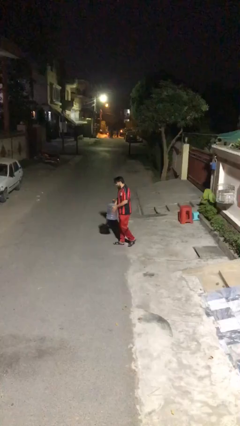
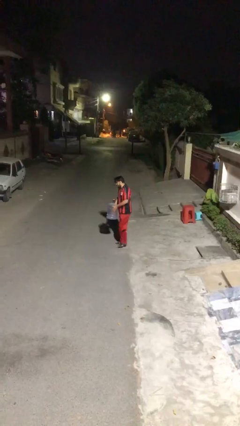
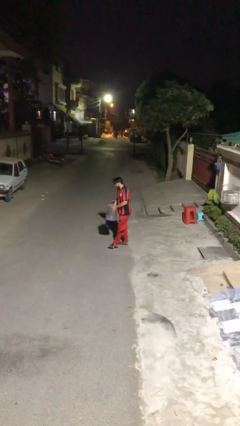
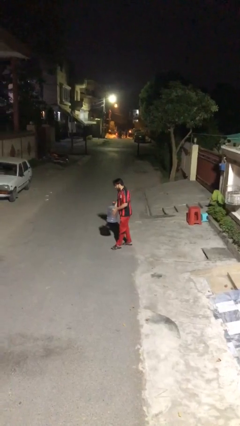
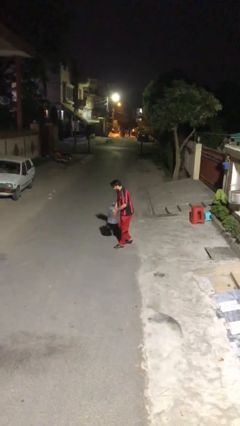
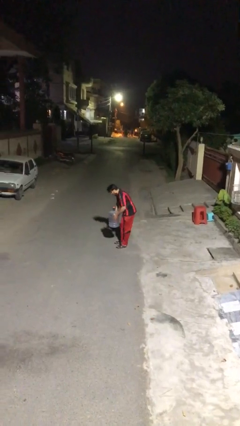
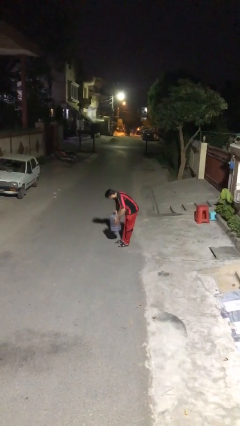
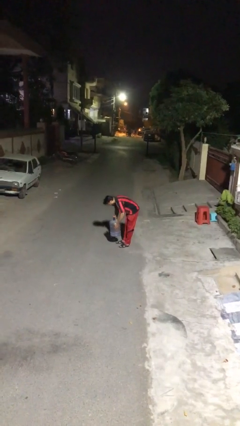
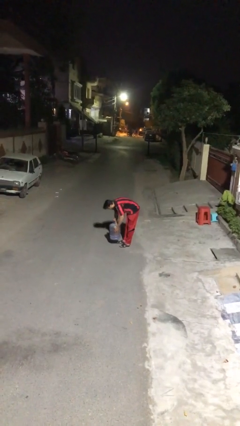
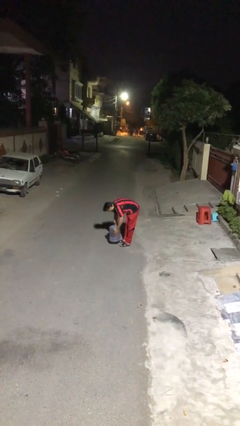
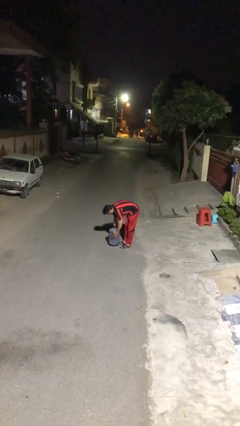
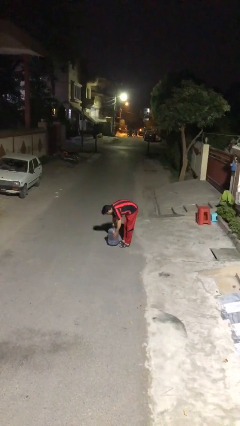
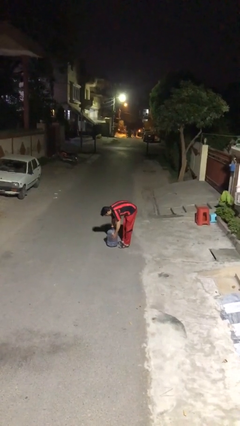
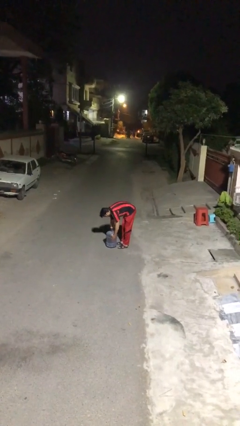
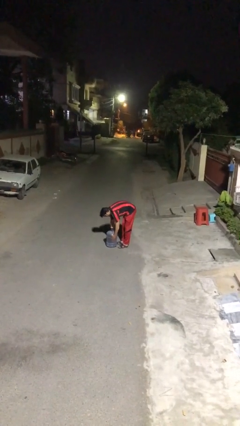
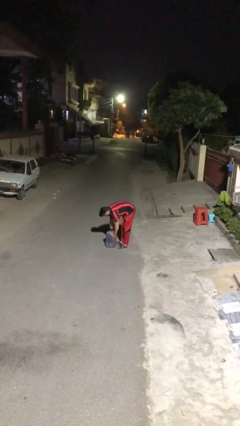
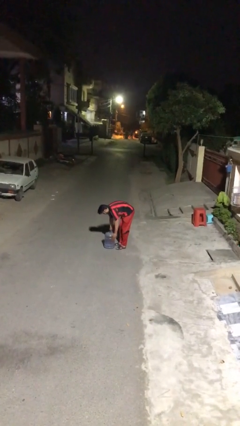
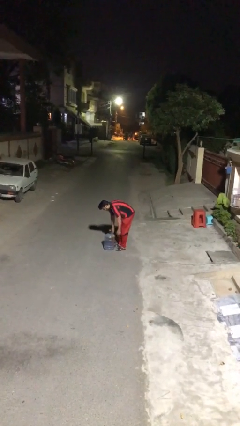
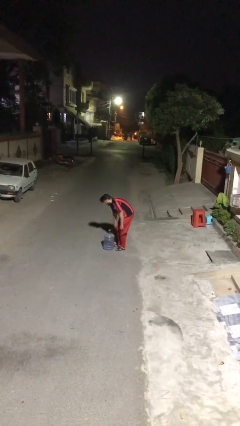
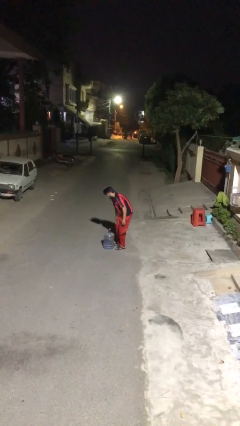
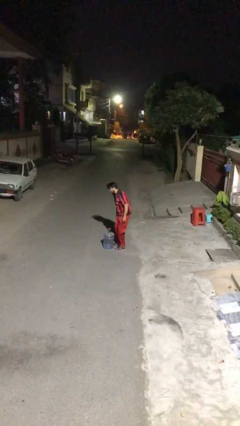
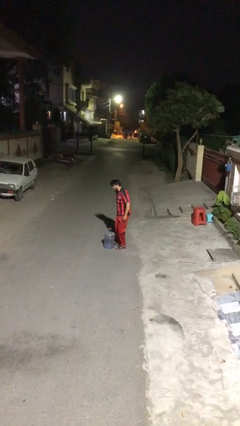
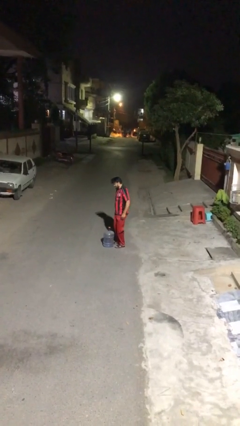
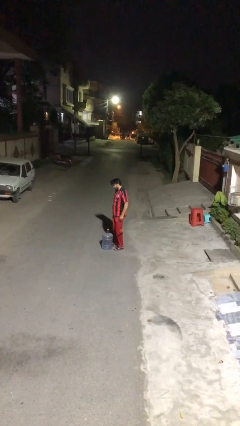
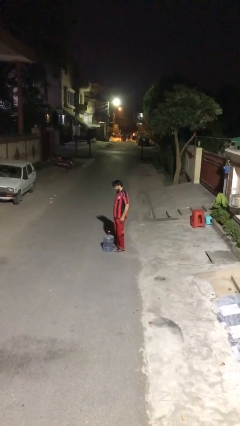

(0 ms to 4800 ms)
person puts down object on floor

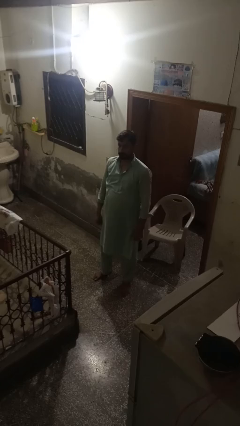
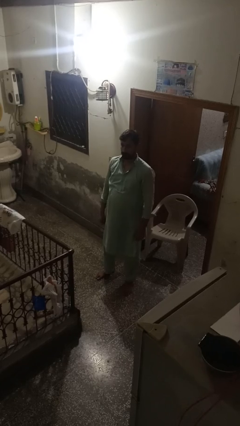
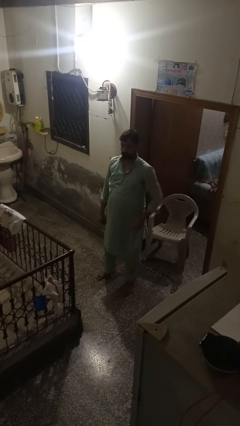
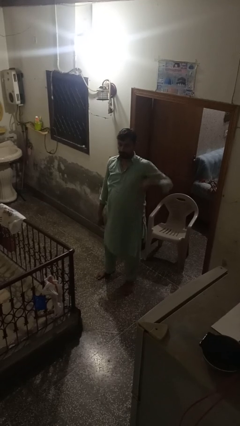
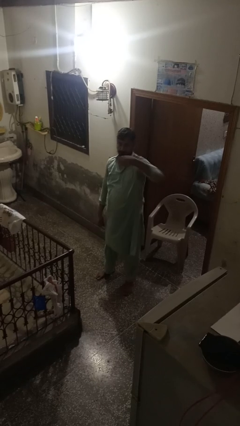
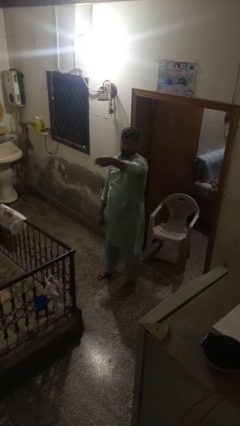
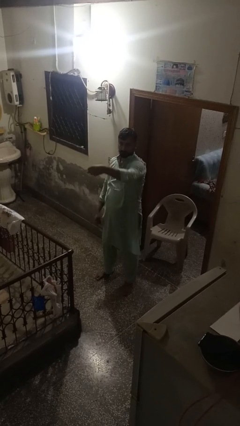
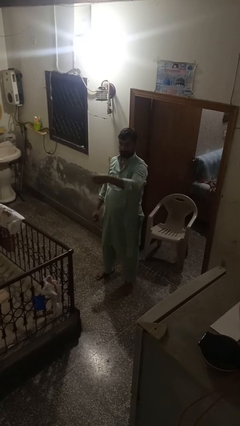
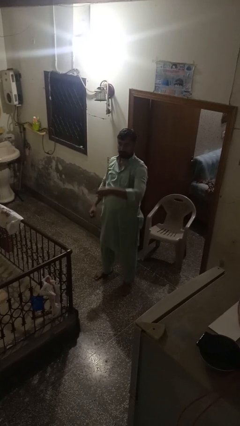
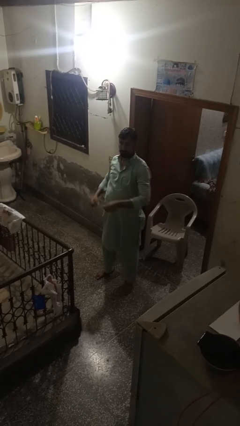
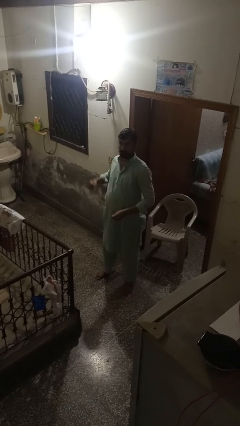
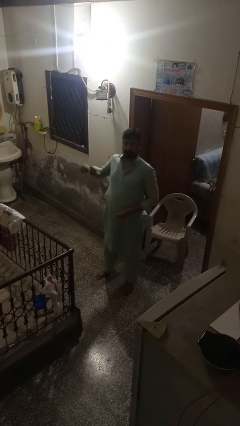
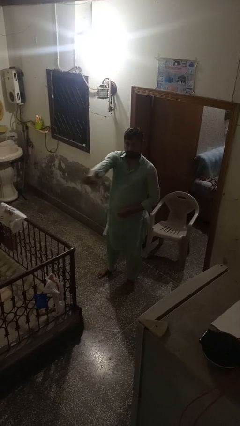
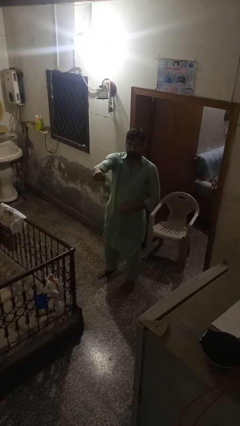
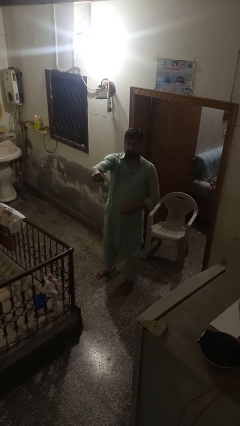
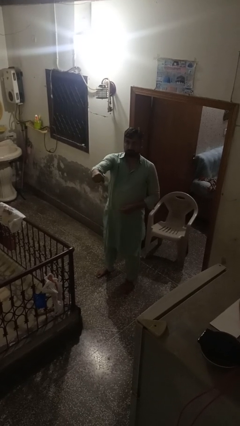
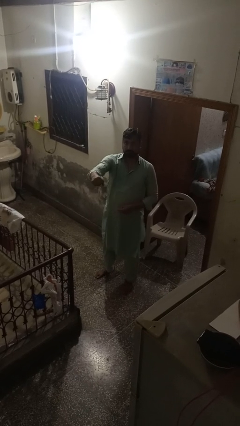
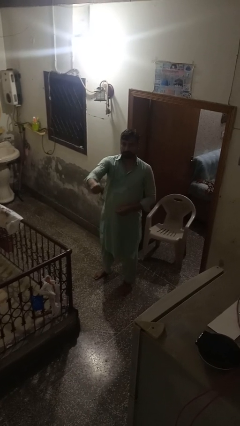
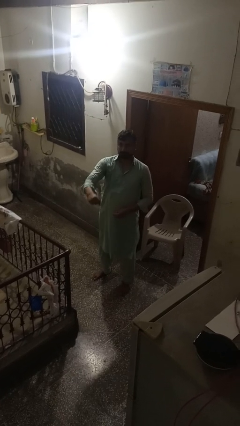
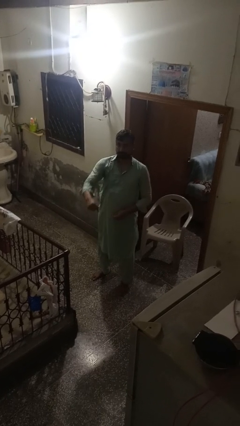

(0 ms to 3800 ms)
person punches

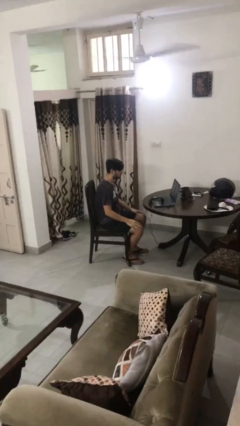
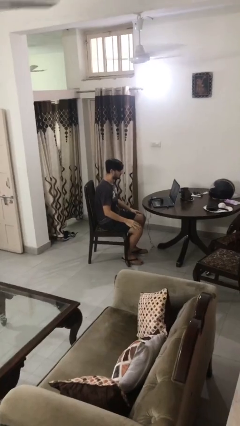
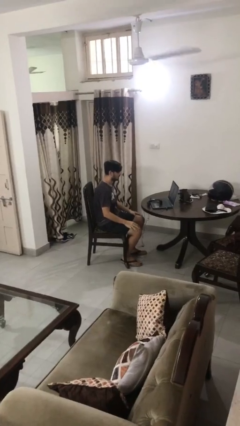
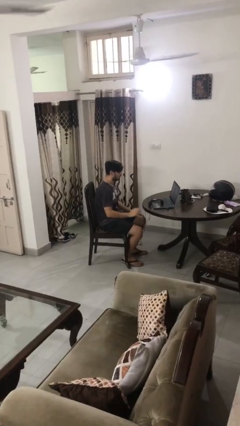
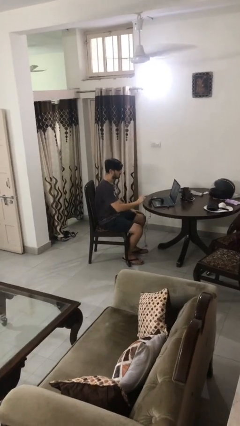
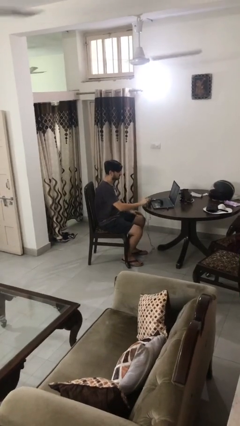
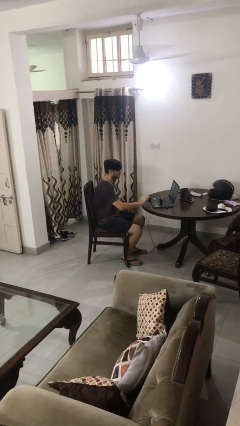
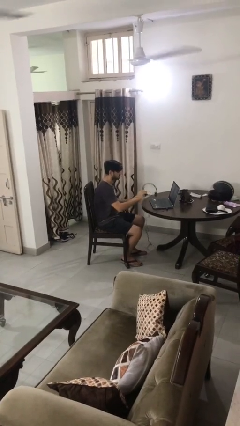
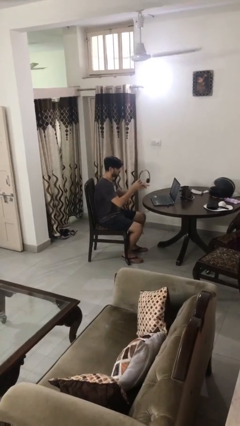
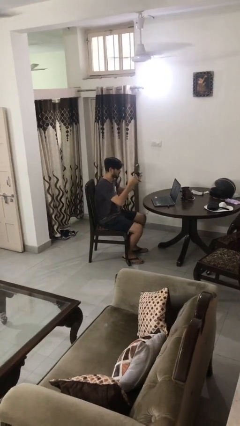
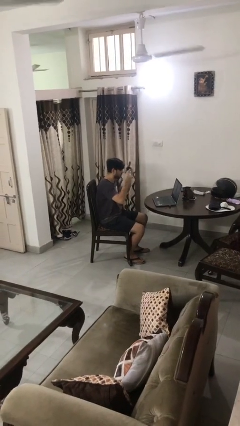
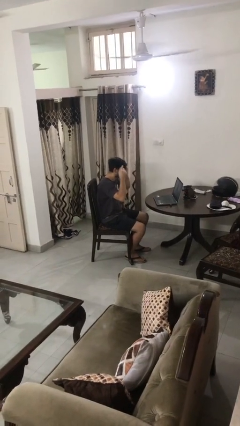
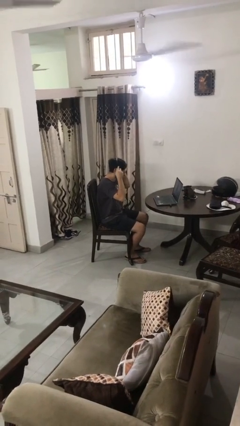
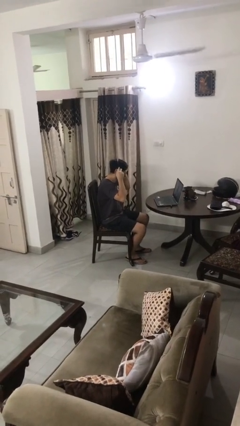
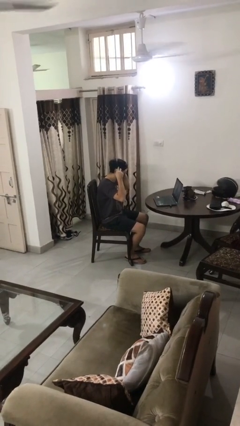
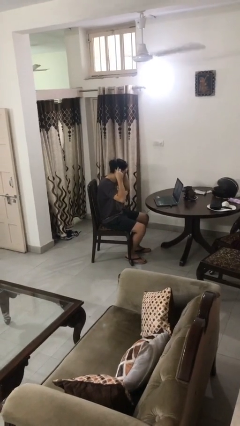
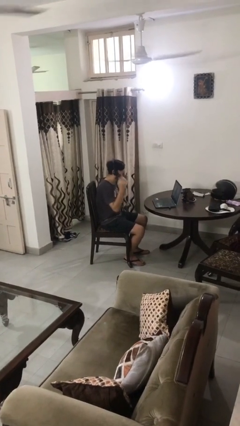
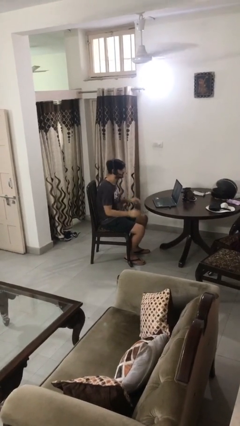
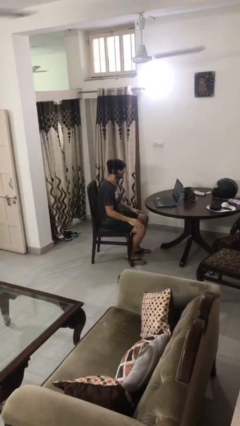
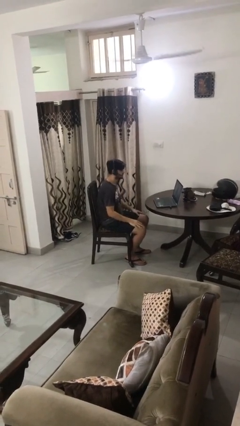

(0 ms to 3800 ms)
person puts on headphones

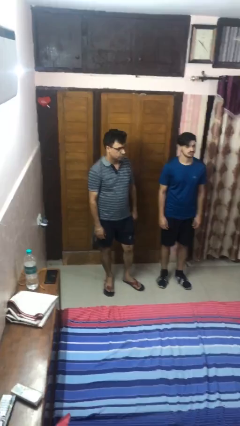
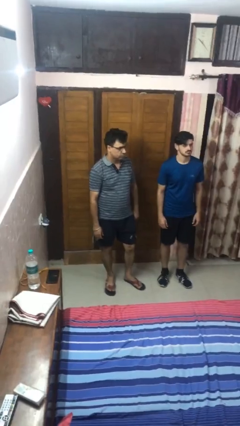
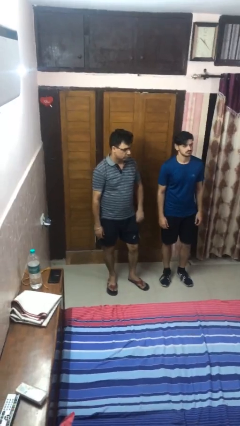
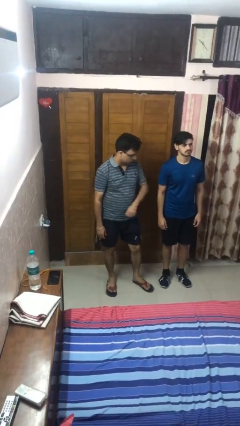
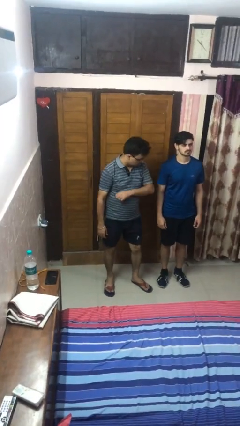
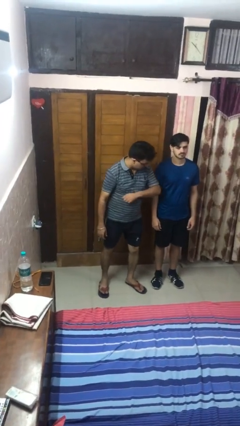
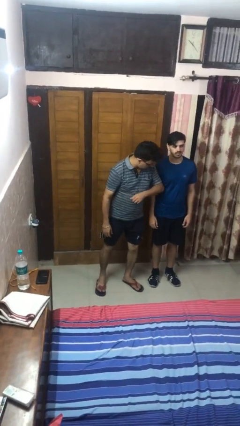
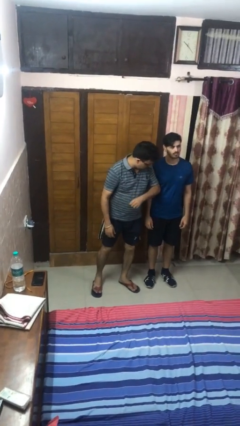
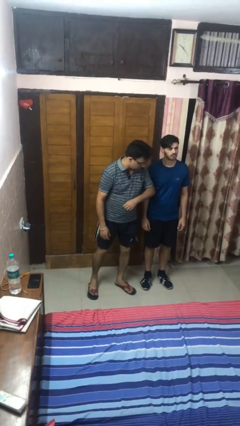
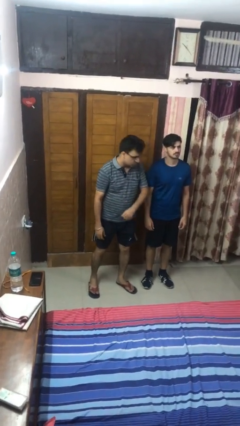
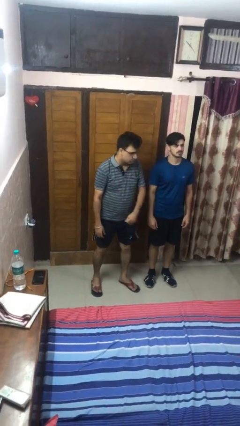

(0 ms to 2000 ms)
person nudges person with elbow

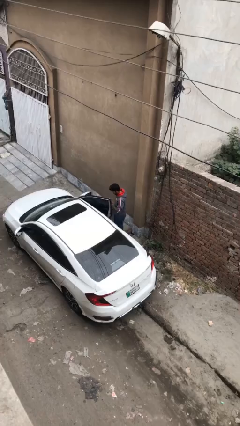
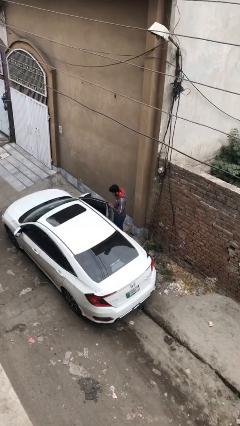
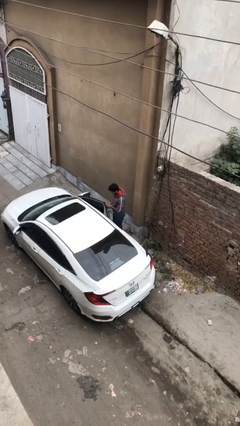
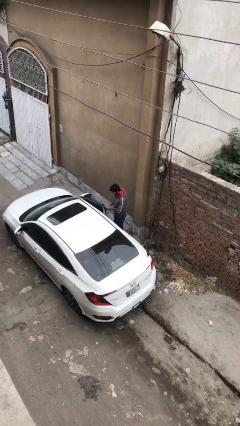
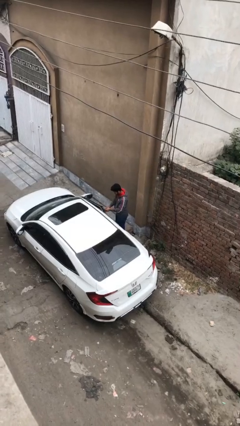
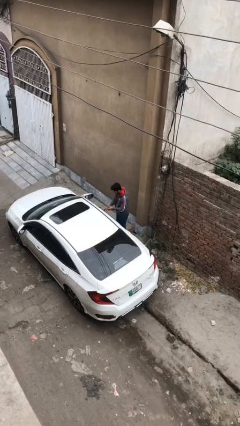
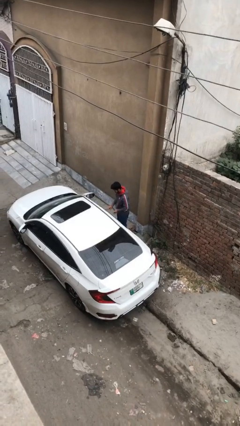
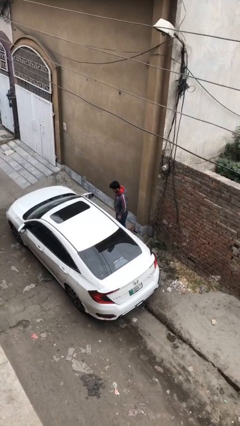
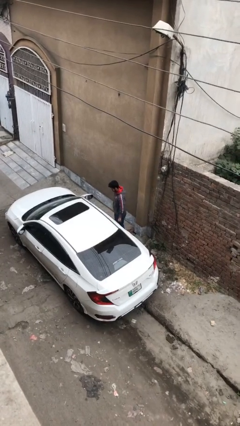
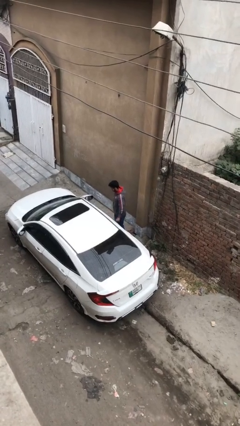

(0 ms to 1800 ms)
person closes car door

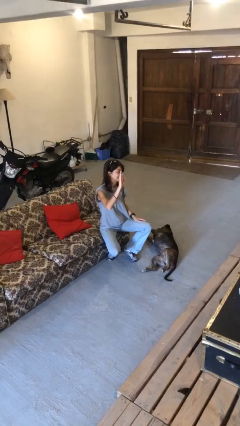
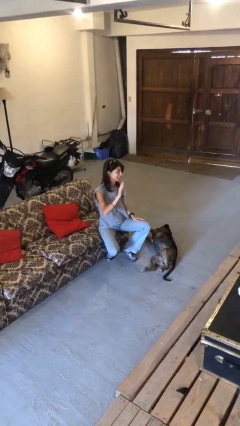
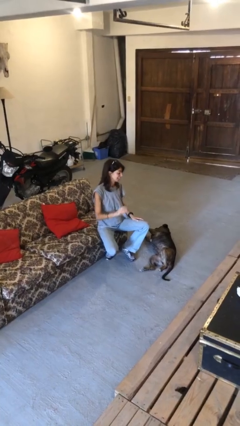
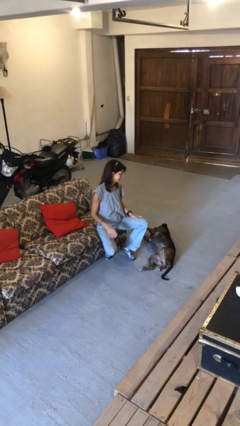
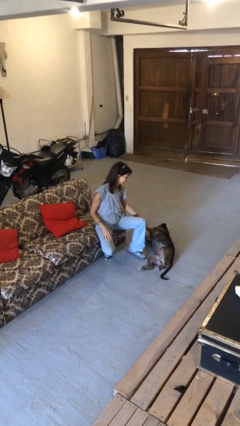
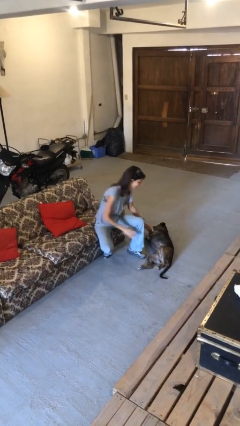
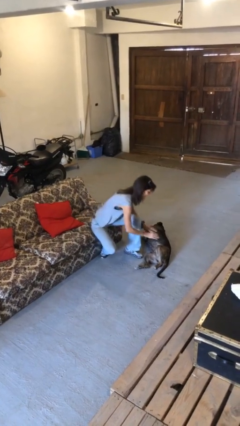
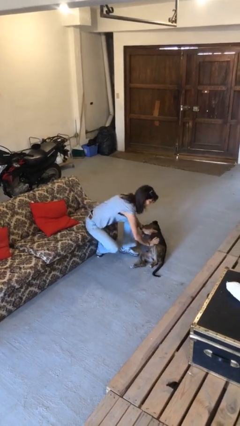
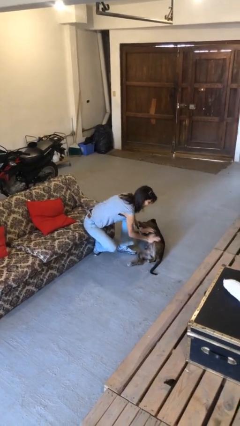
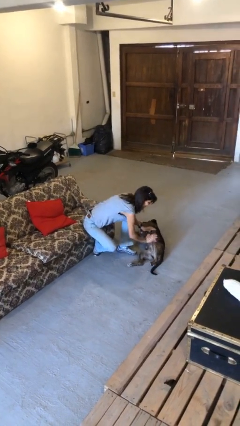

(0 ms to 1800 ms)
person gestures lower hand
